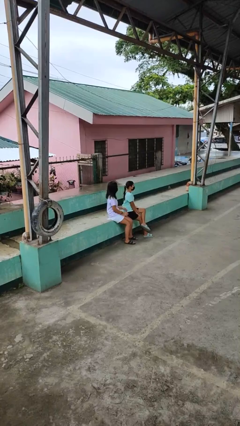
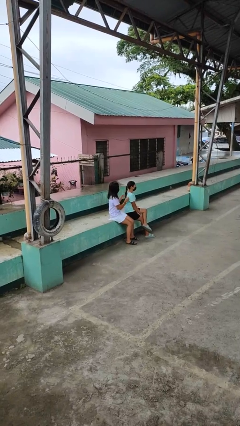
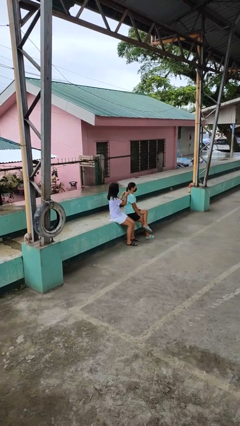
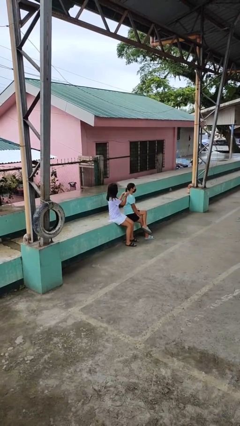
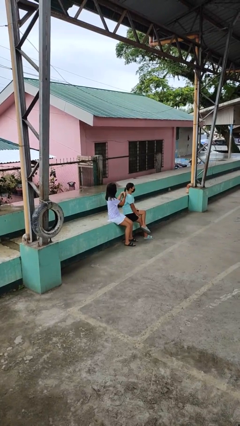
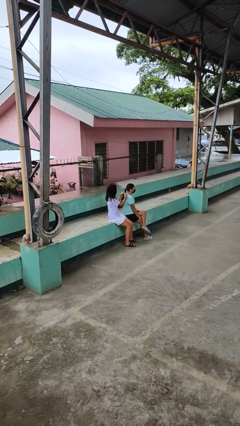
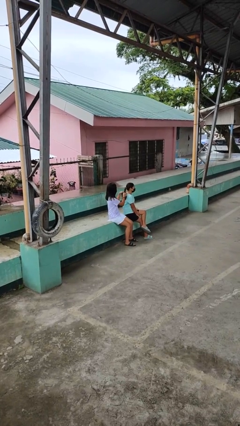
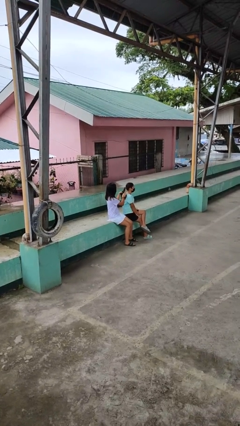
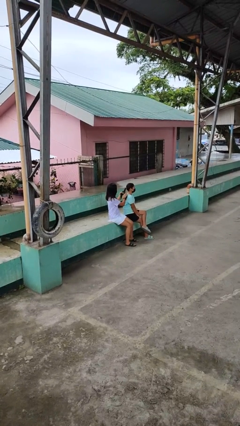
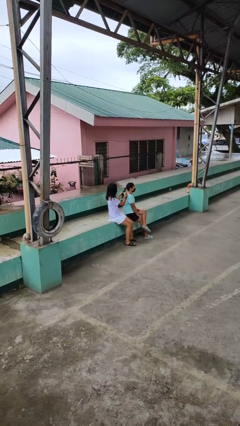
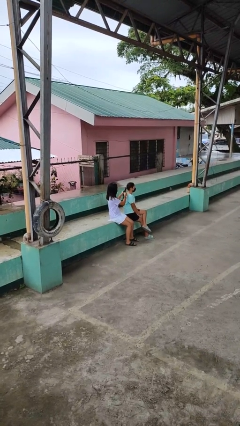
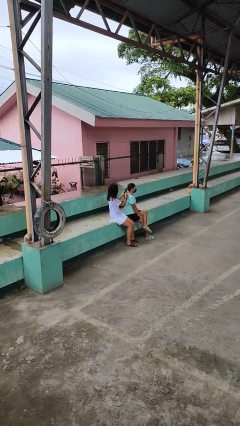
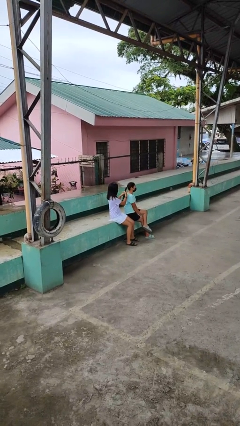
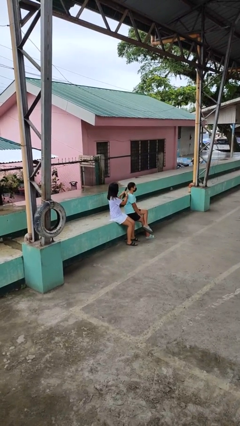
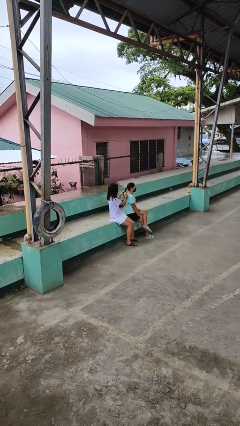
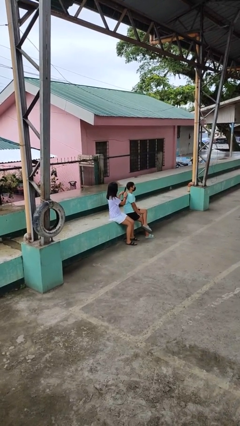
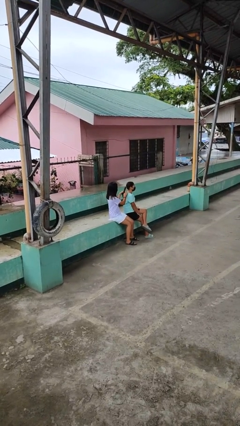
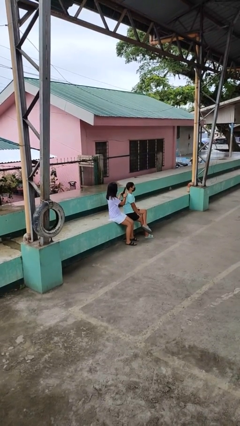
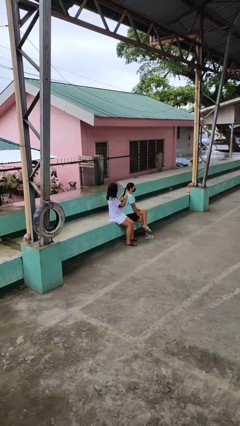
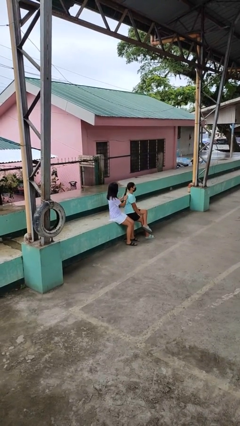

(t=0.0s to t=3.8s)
person braids hair of person

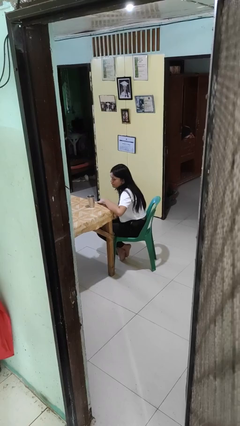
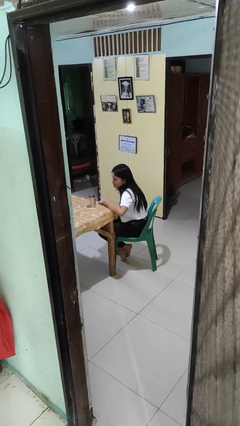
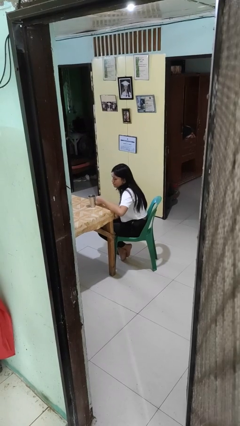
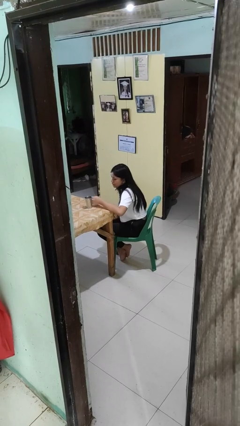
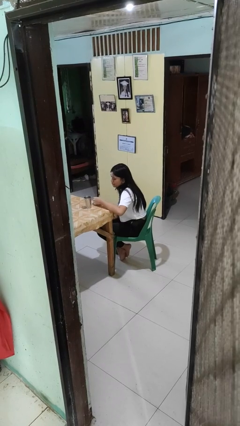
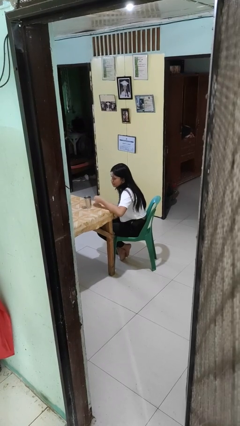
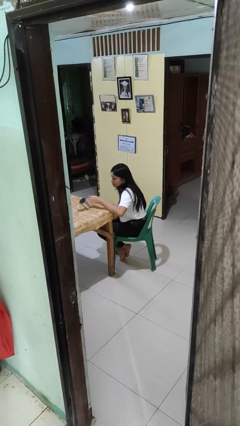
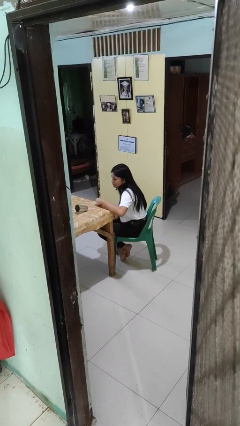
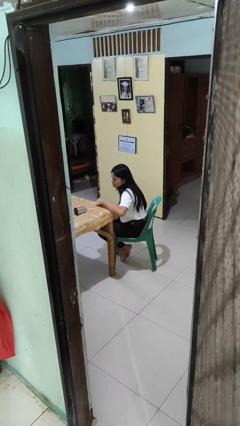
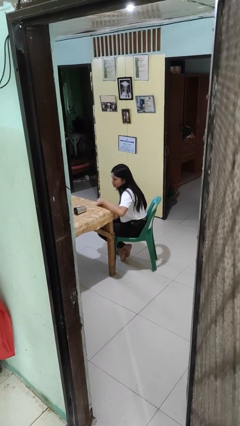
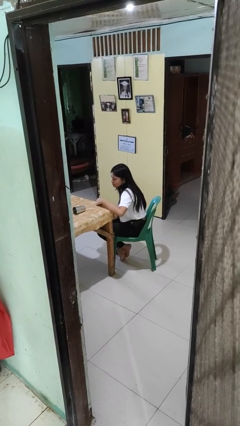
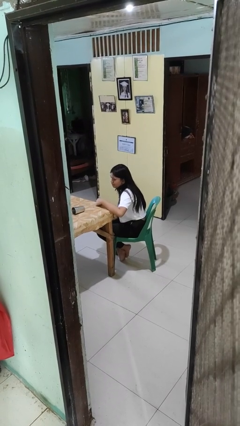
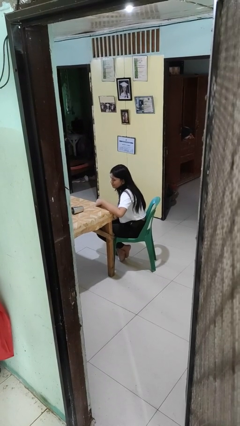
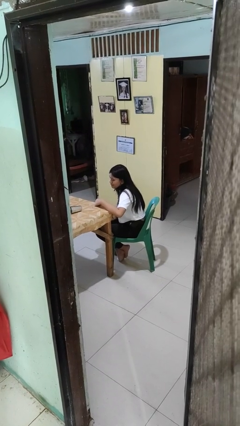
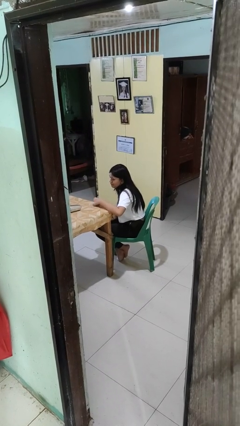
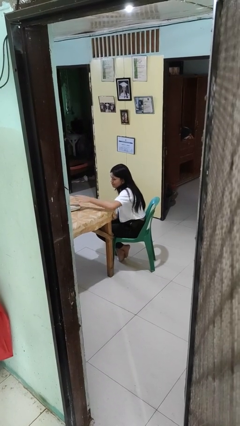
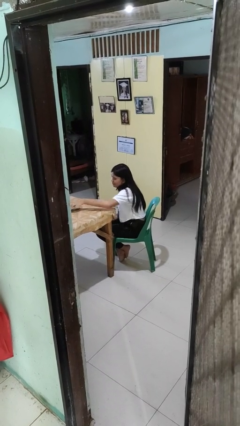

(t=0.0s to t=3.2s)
person knocks over glass

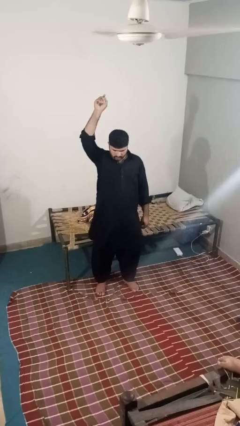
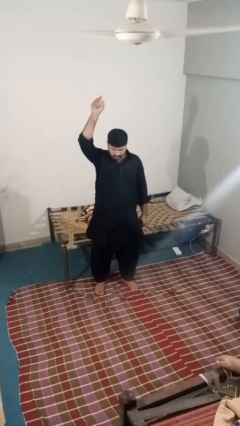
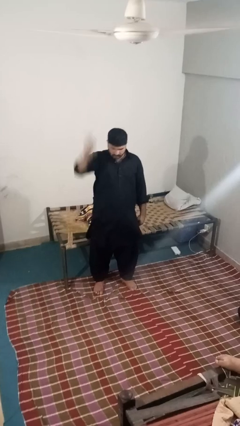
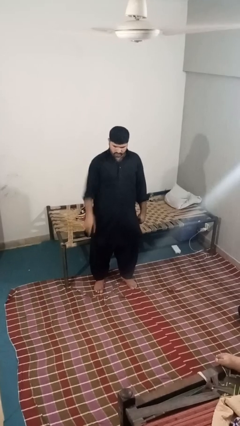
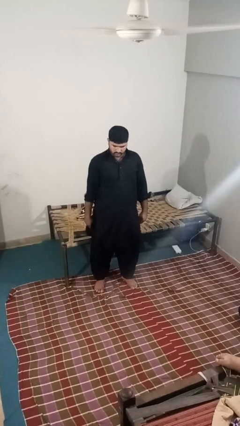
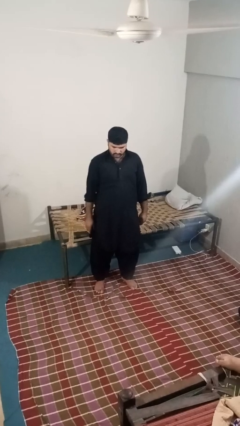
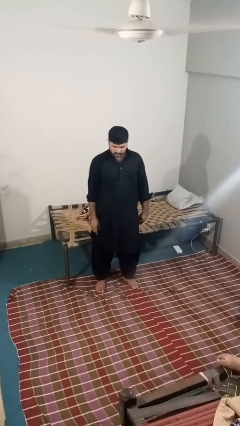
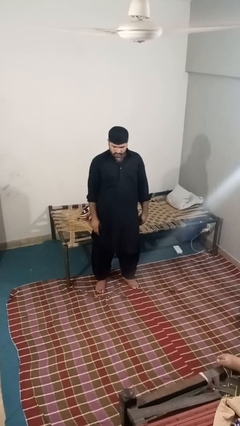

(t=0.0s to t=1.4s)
person gestures swipe down

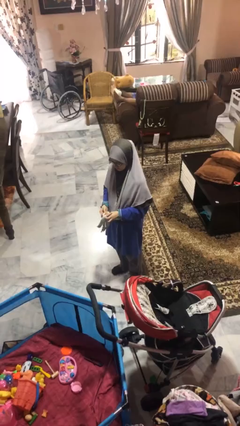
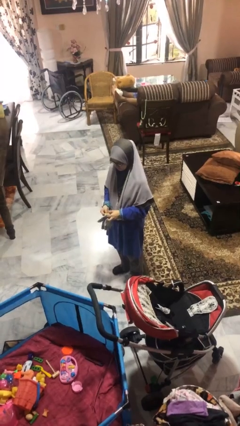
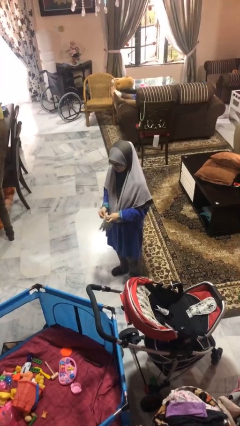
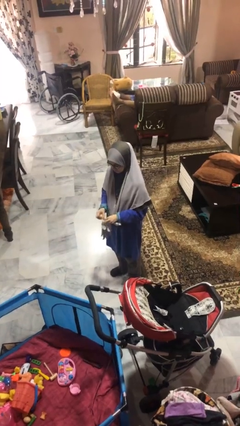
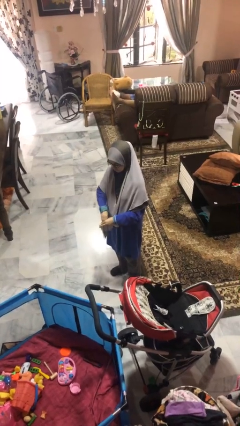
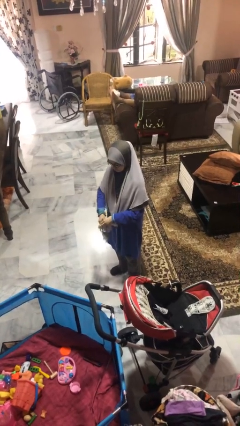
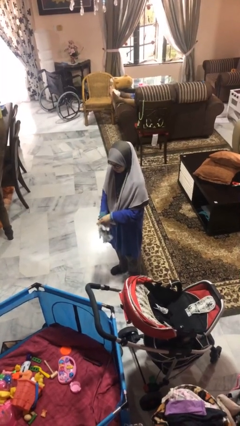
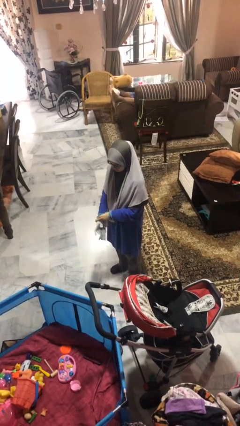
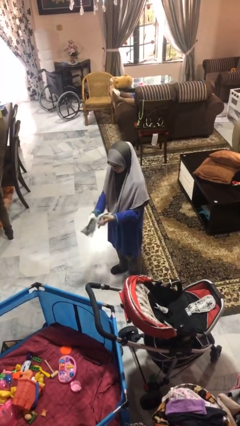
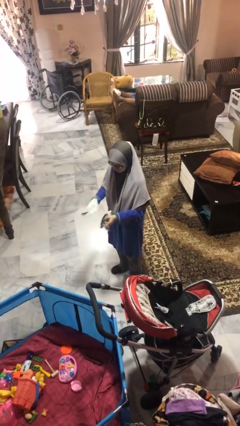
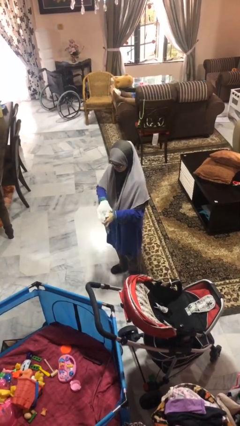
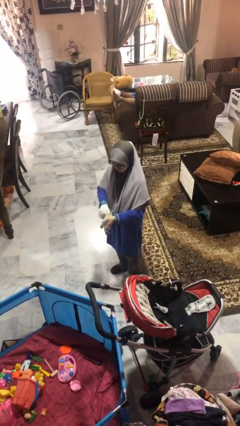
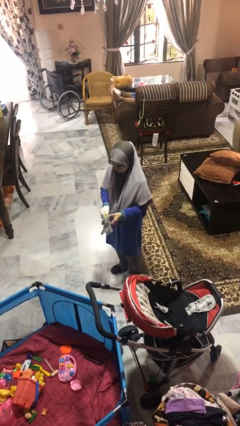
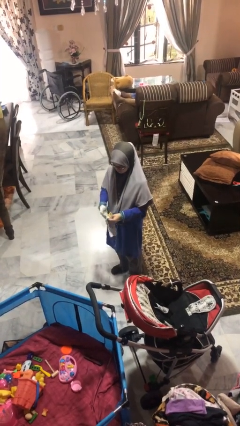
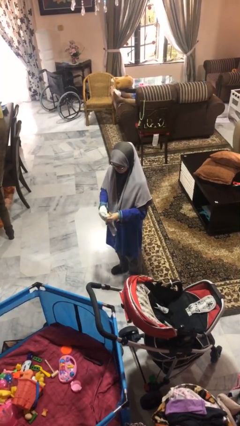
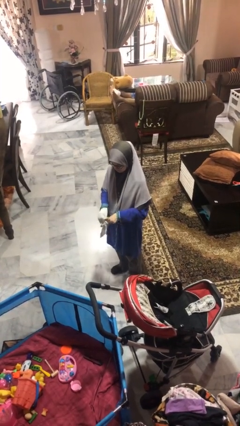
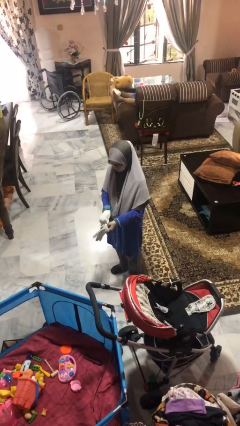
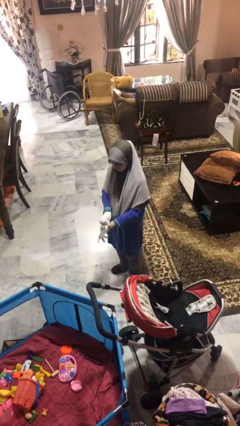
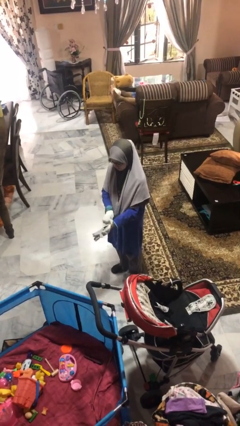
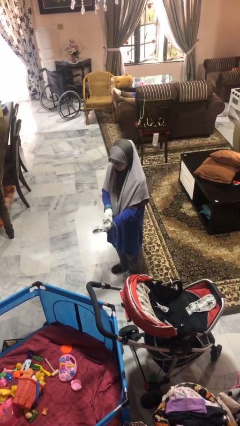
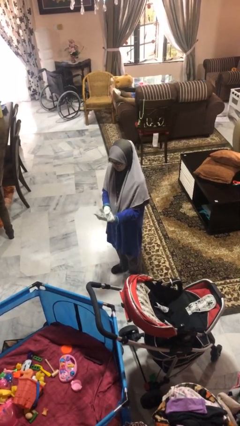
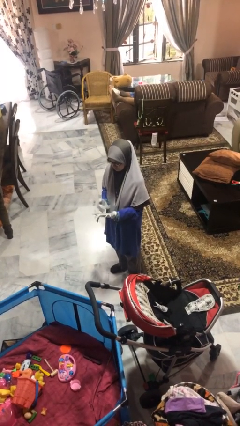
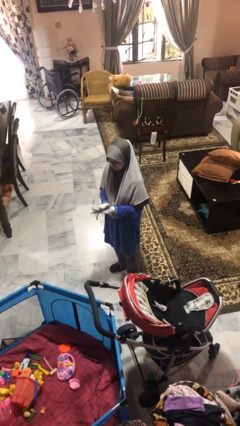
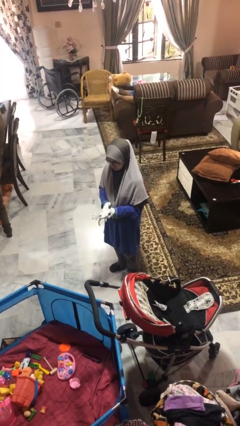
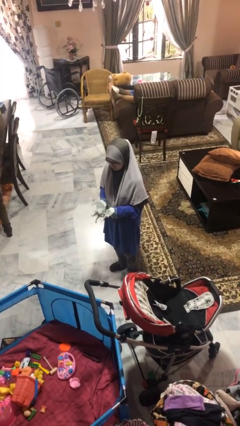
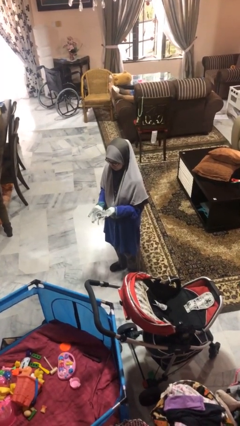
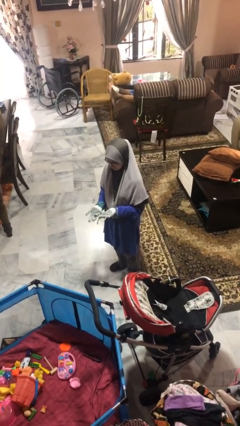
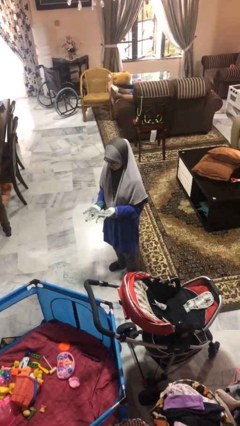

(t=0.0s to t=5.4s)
person puts on gloves

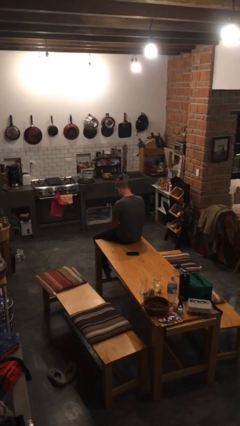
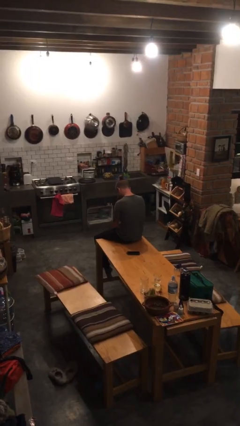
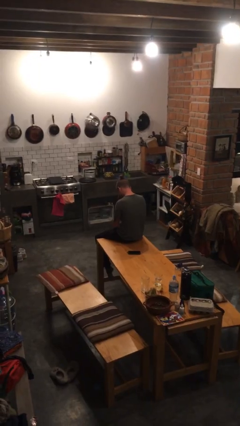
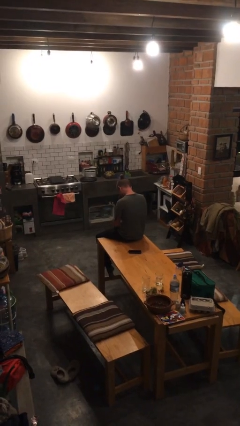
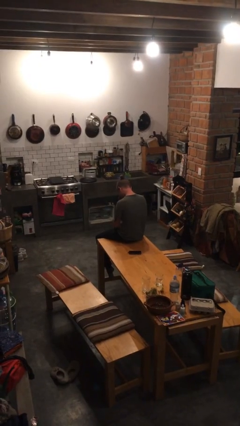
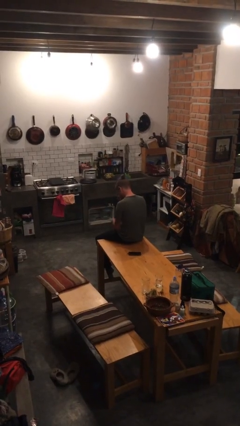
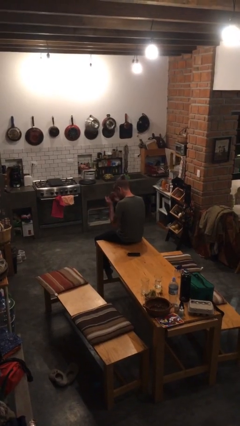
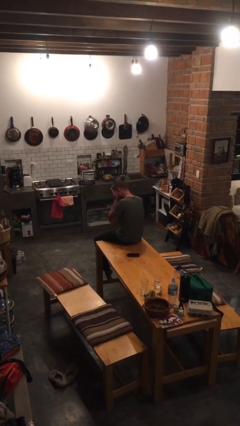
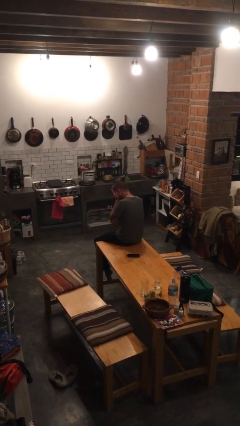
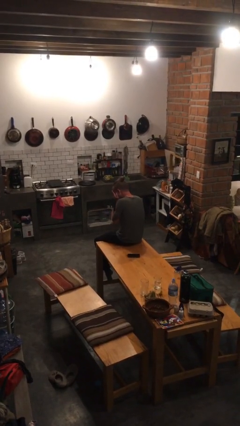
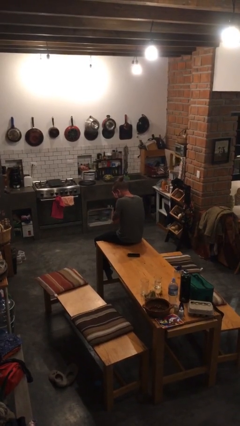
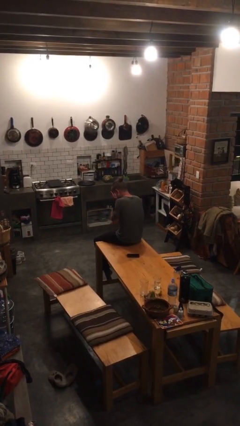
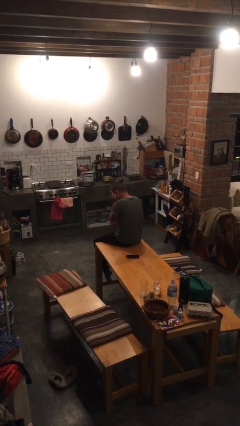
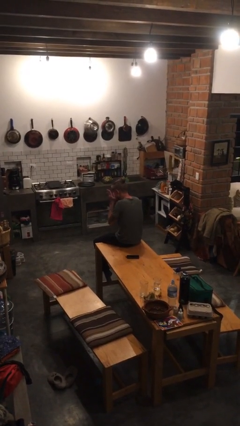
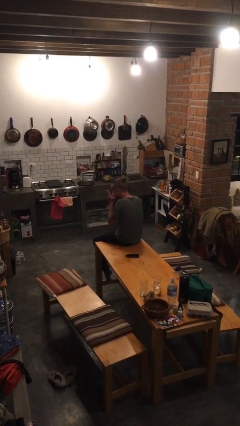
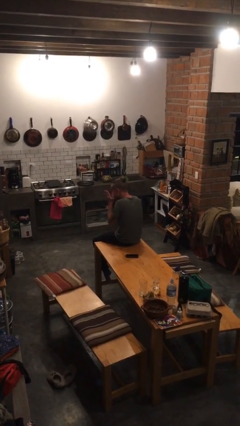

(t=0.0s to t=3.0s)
person covers face with hands

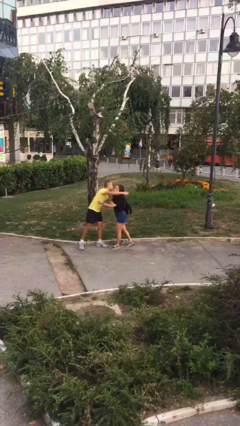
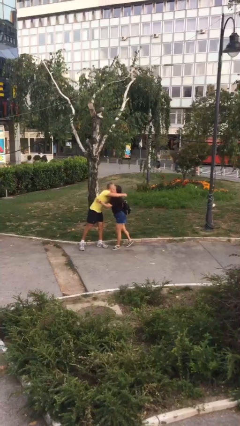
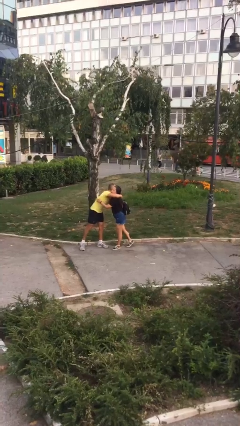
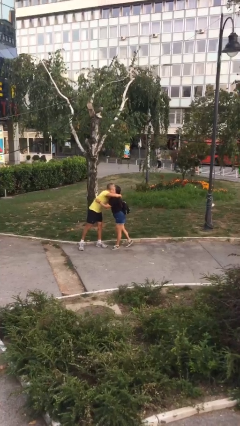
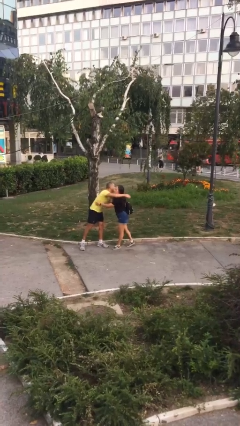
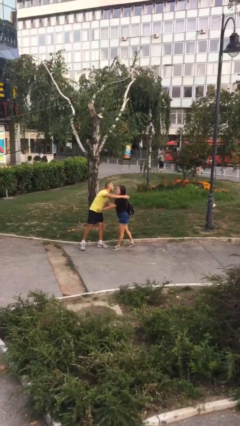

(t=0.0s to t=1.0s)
person embraces person
